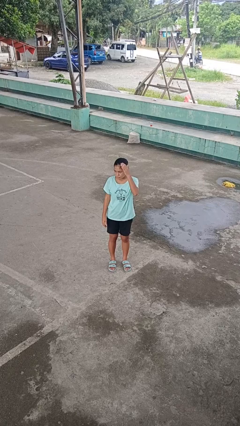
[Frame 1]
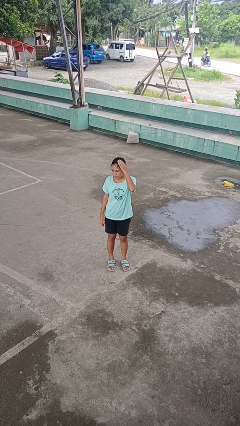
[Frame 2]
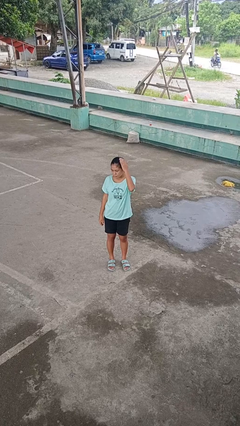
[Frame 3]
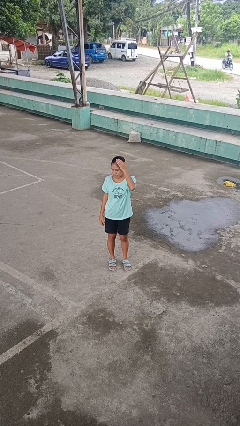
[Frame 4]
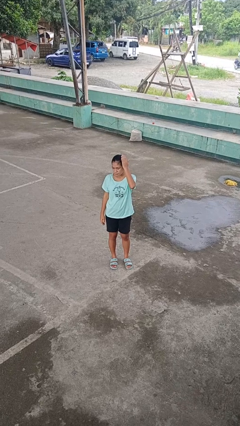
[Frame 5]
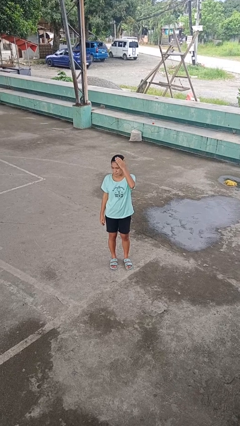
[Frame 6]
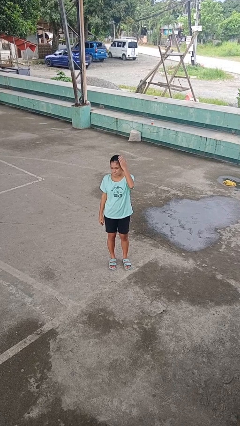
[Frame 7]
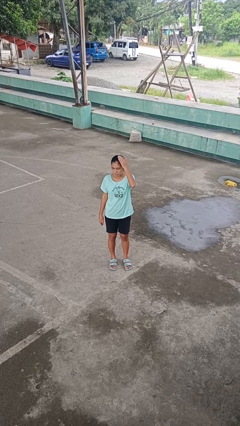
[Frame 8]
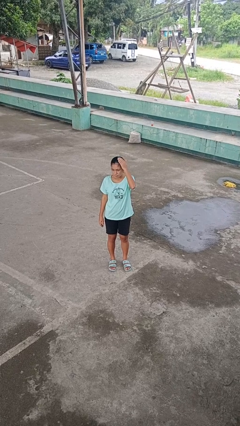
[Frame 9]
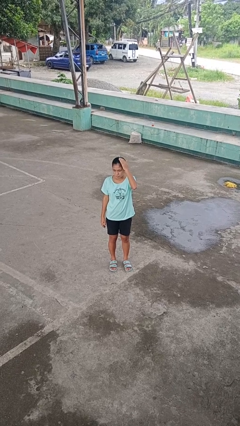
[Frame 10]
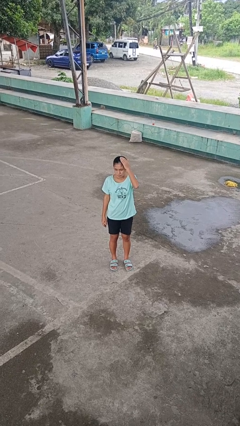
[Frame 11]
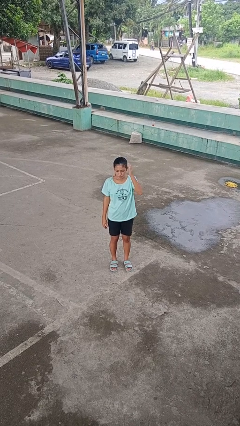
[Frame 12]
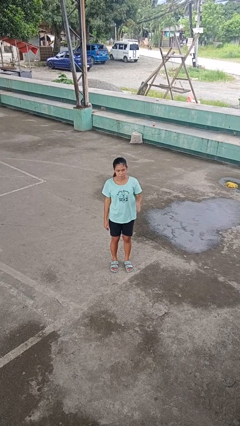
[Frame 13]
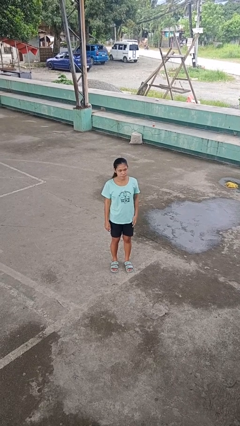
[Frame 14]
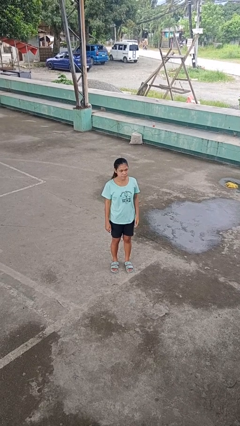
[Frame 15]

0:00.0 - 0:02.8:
person pats head

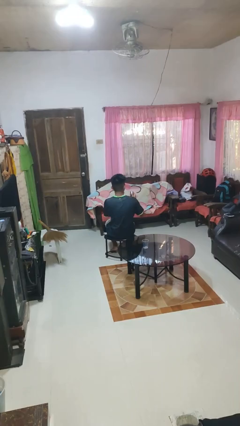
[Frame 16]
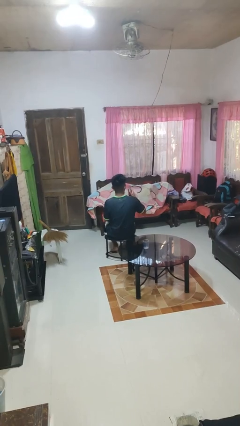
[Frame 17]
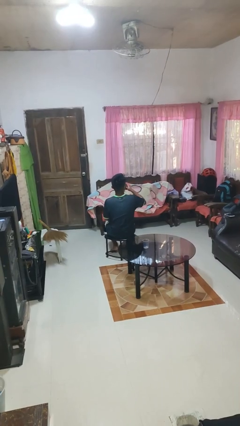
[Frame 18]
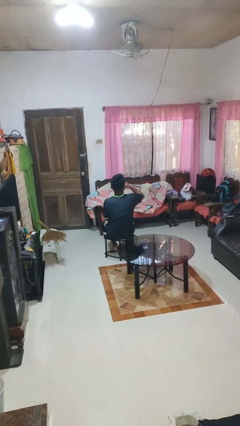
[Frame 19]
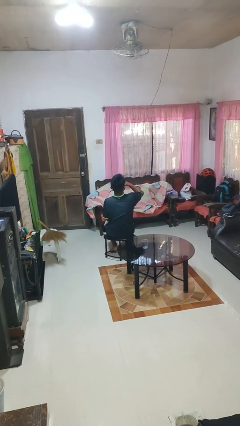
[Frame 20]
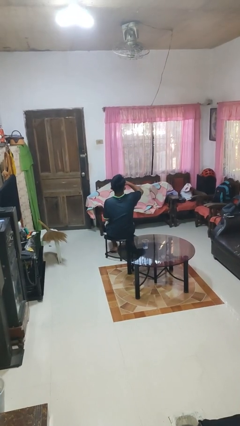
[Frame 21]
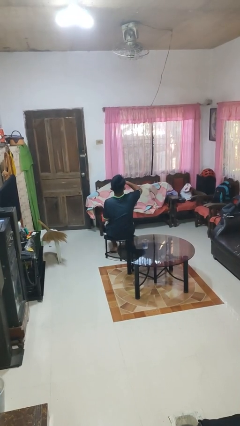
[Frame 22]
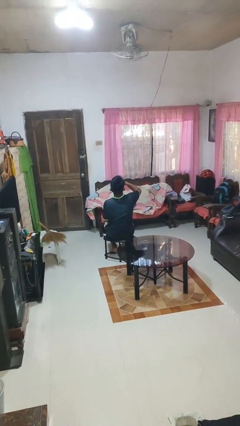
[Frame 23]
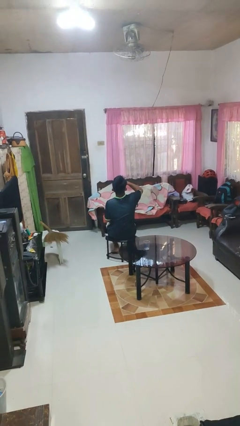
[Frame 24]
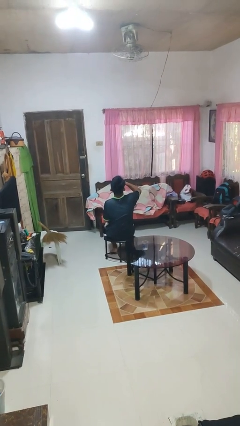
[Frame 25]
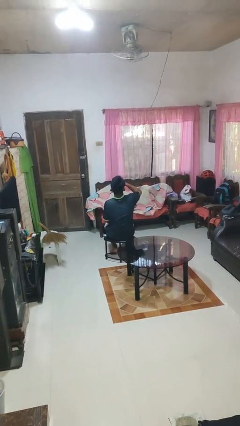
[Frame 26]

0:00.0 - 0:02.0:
person drinks from beverage can

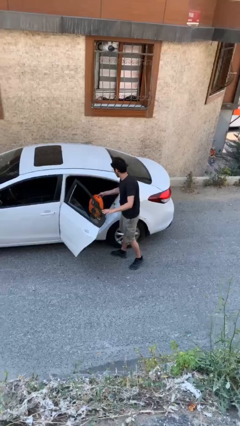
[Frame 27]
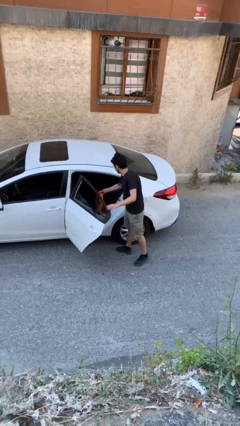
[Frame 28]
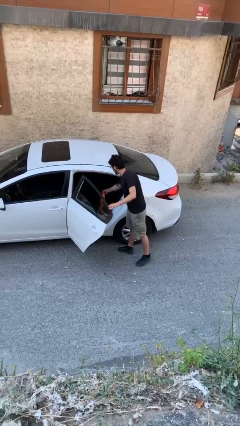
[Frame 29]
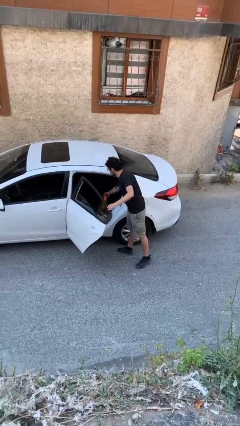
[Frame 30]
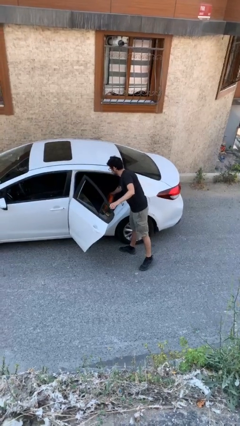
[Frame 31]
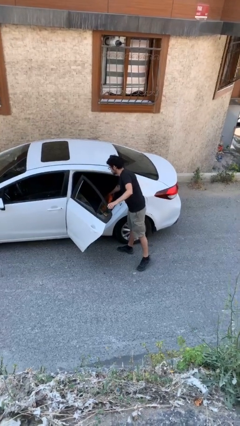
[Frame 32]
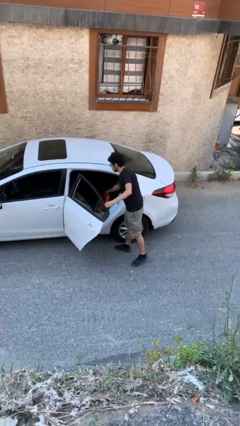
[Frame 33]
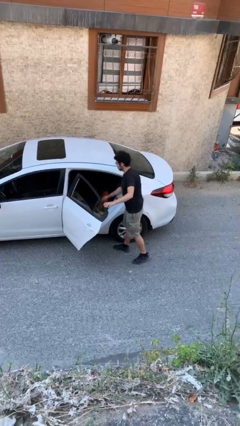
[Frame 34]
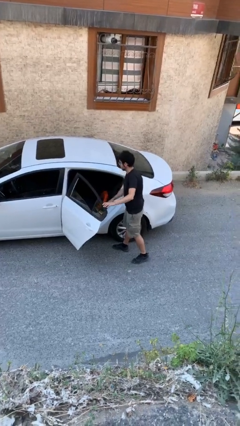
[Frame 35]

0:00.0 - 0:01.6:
person loads car

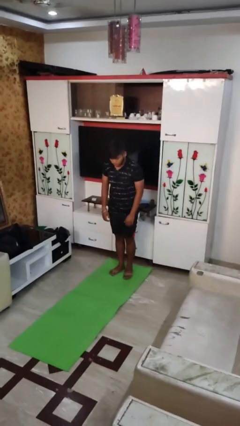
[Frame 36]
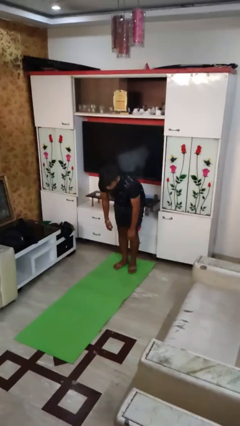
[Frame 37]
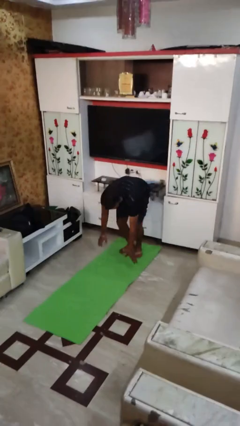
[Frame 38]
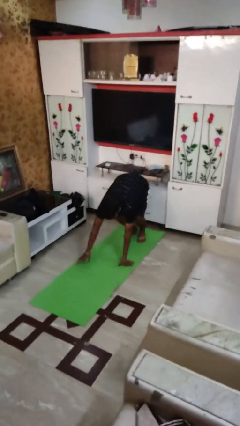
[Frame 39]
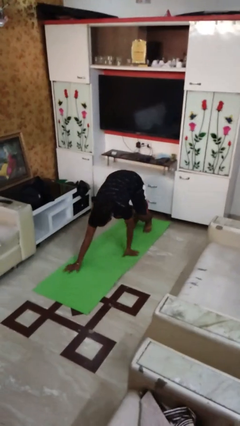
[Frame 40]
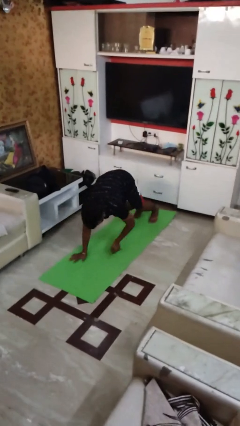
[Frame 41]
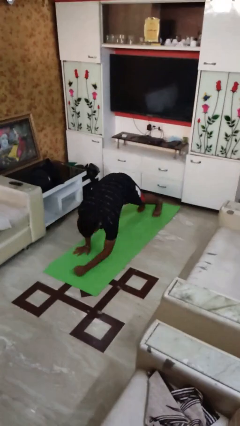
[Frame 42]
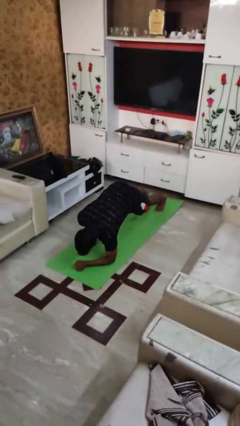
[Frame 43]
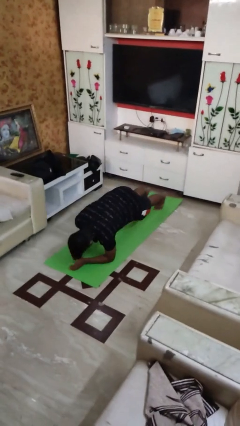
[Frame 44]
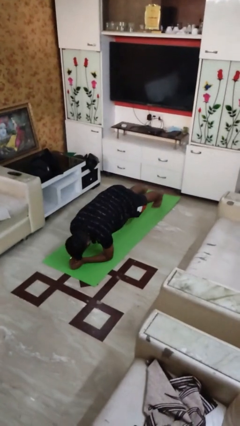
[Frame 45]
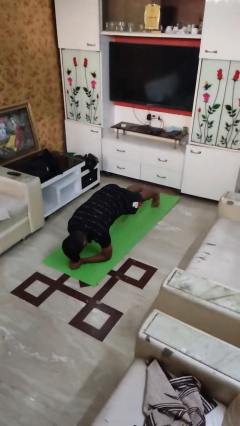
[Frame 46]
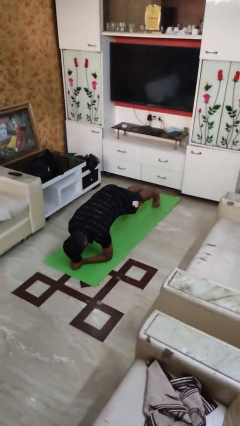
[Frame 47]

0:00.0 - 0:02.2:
person exercises with plank

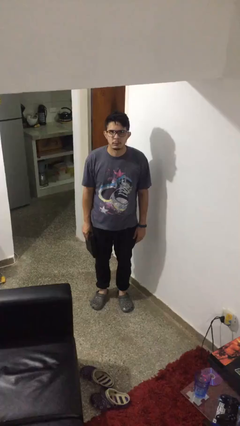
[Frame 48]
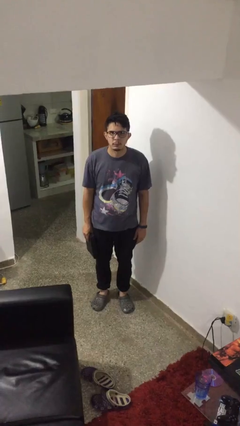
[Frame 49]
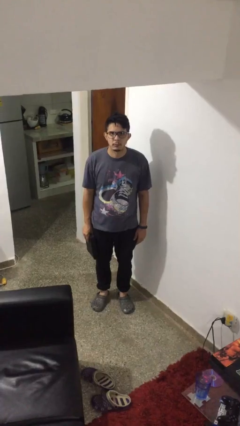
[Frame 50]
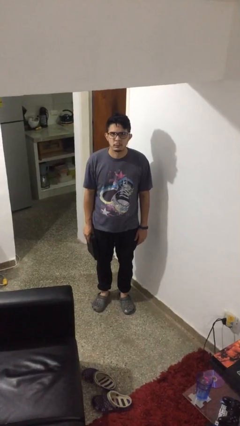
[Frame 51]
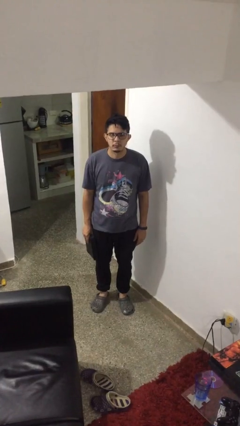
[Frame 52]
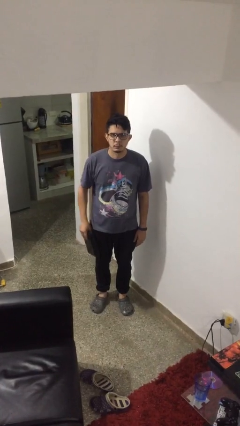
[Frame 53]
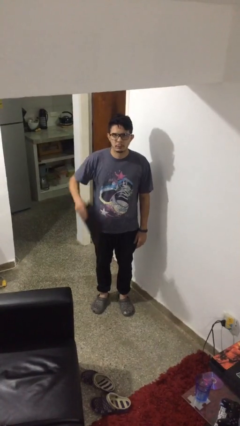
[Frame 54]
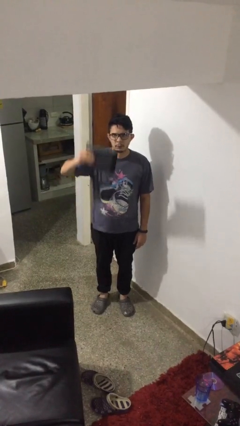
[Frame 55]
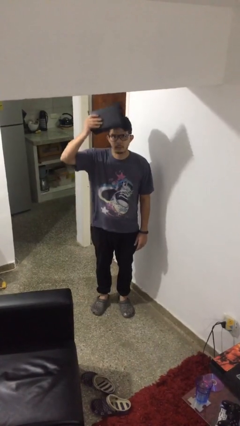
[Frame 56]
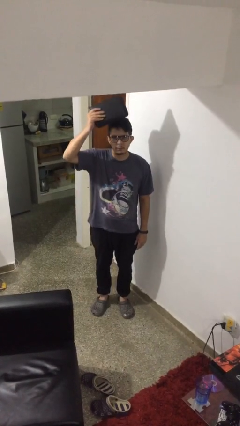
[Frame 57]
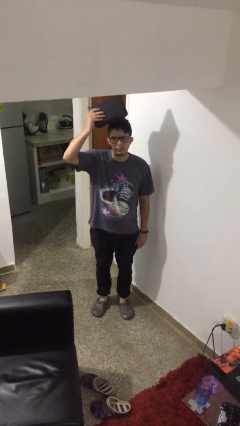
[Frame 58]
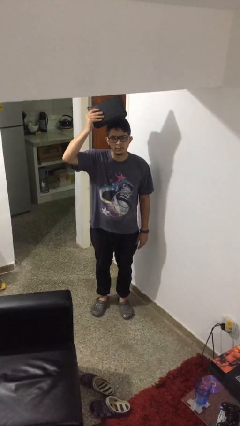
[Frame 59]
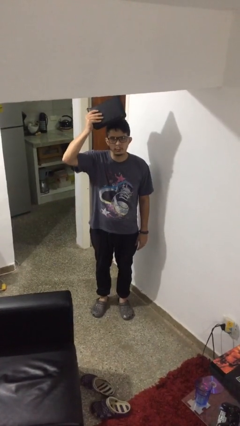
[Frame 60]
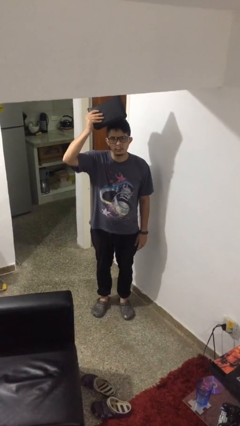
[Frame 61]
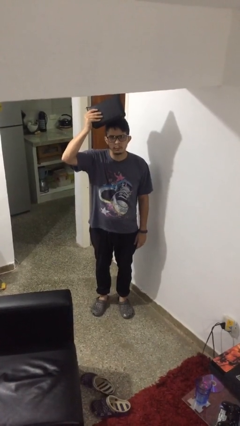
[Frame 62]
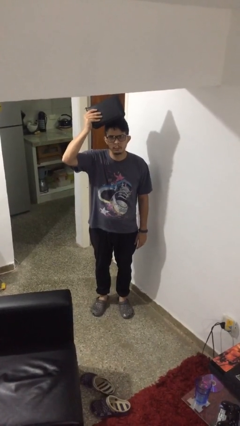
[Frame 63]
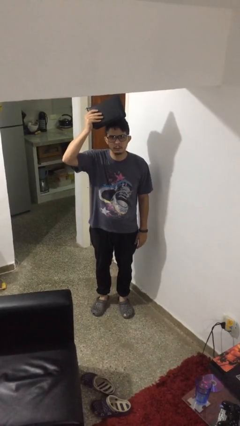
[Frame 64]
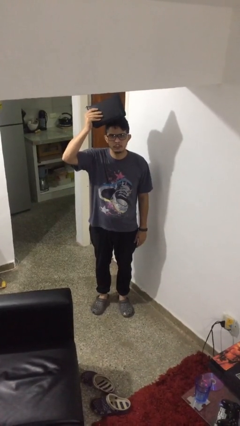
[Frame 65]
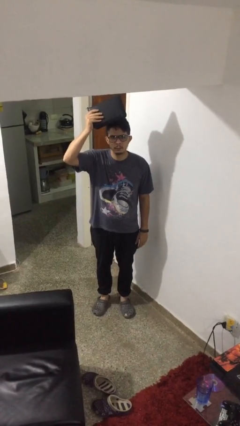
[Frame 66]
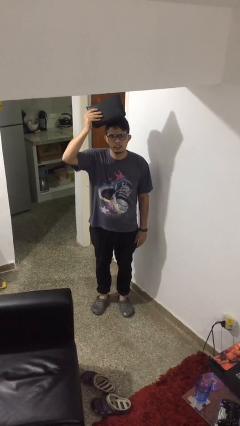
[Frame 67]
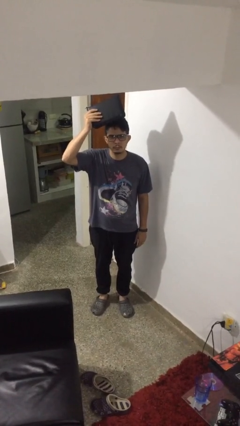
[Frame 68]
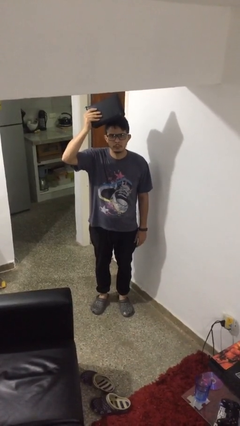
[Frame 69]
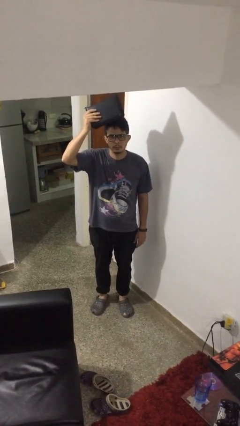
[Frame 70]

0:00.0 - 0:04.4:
person holds object above head

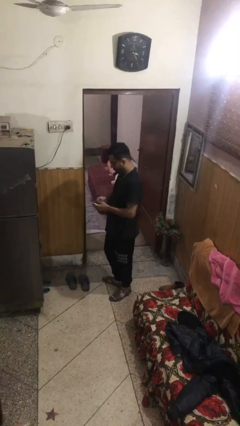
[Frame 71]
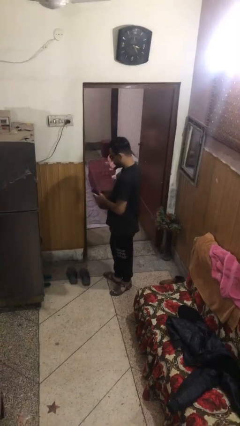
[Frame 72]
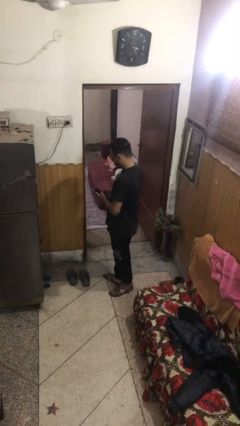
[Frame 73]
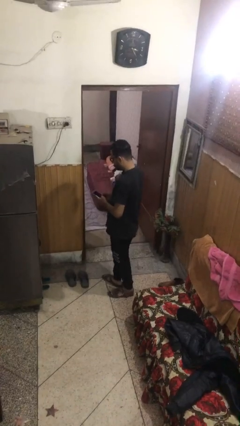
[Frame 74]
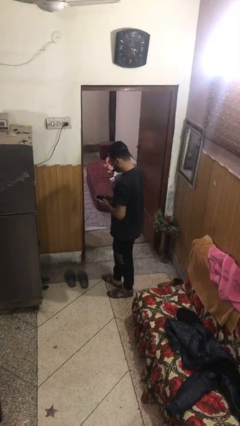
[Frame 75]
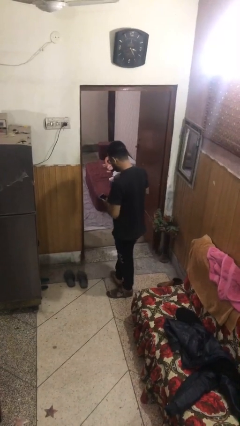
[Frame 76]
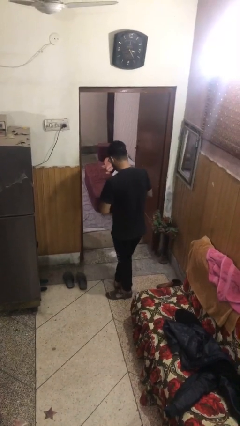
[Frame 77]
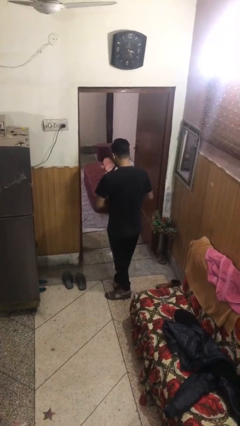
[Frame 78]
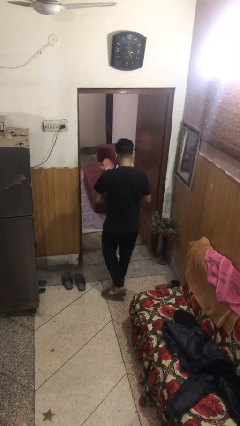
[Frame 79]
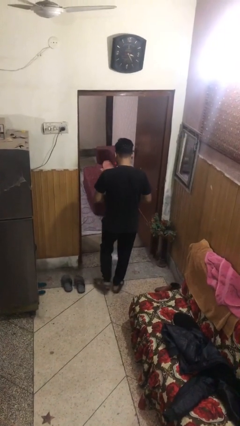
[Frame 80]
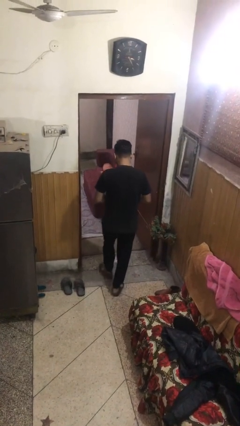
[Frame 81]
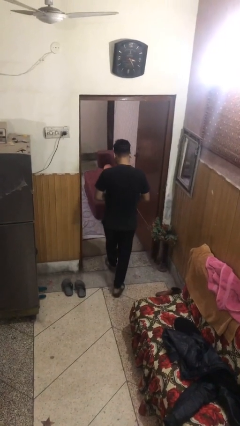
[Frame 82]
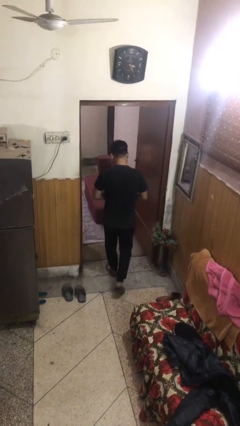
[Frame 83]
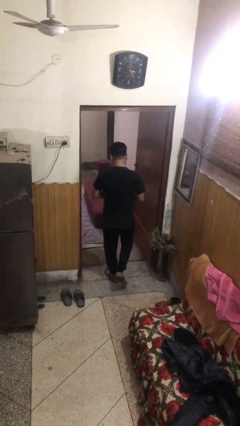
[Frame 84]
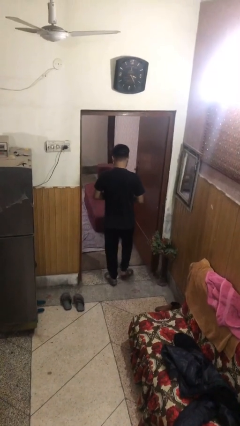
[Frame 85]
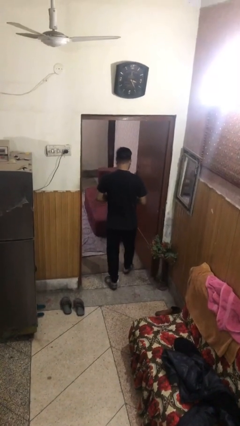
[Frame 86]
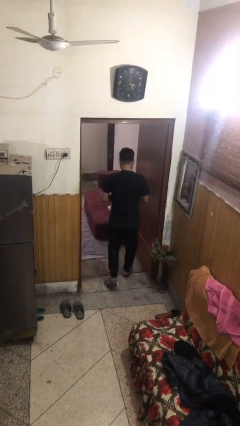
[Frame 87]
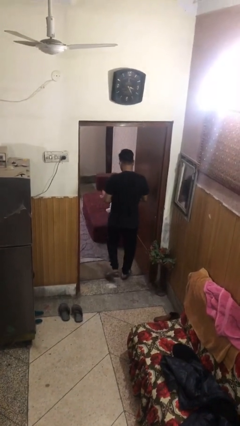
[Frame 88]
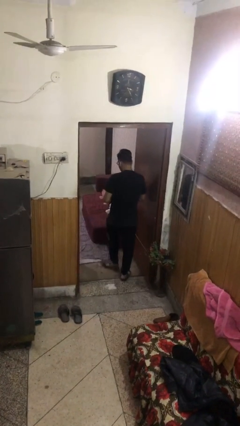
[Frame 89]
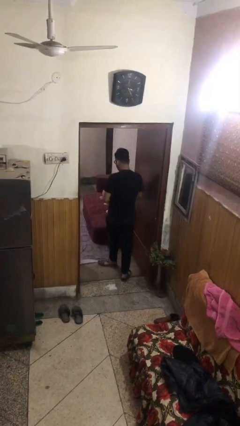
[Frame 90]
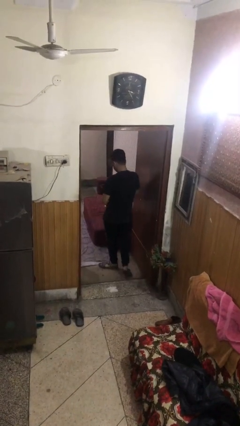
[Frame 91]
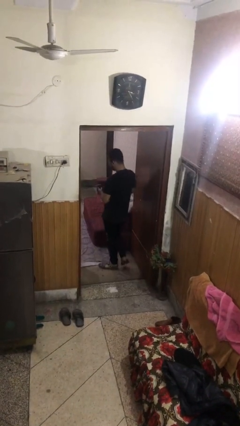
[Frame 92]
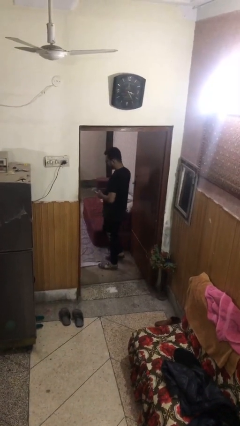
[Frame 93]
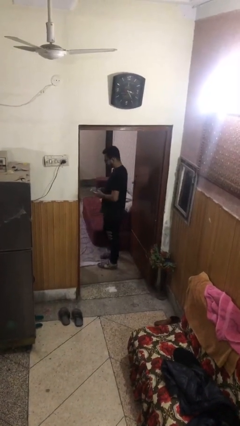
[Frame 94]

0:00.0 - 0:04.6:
person exits scene through structure
